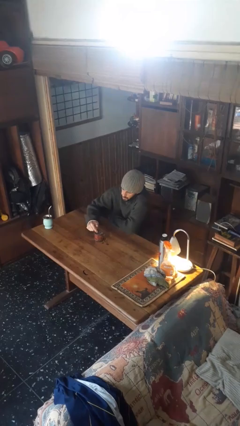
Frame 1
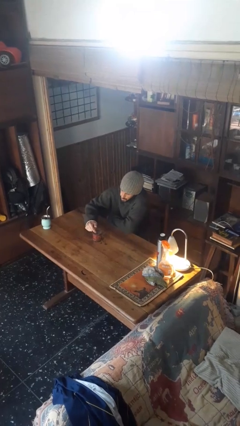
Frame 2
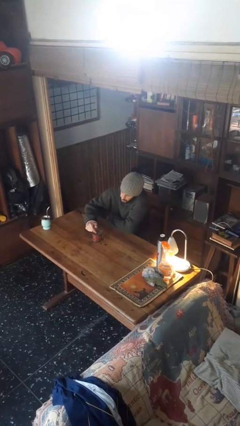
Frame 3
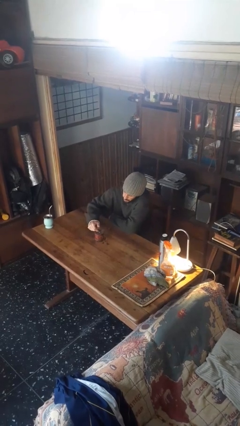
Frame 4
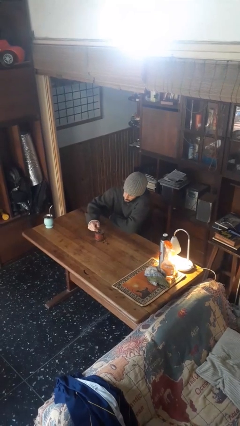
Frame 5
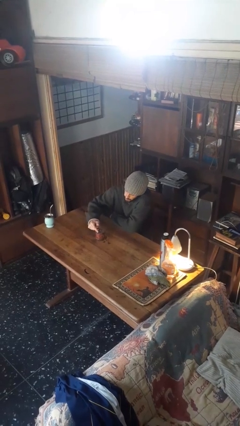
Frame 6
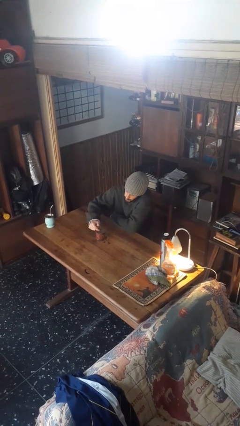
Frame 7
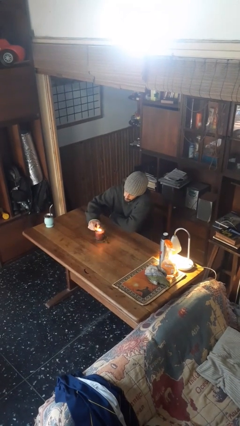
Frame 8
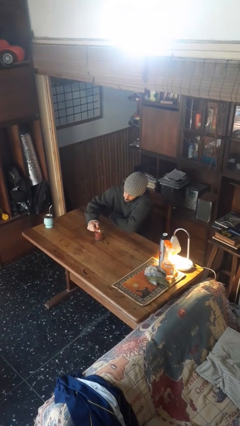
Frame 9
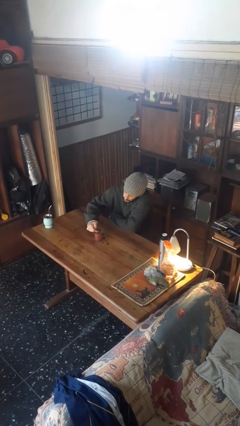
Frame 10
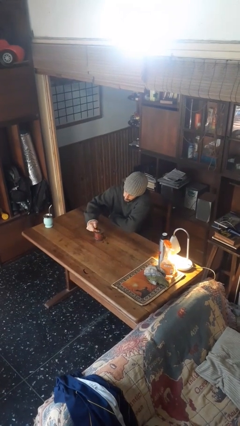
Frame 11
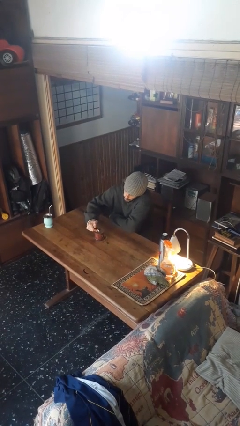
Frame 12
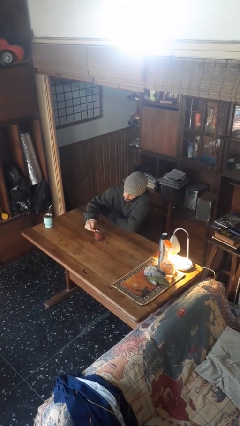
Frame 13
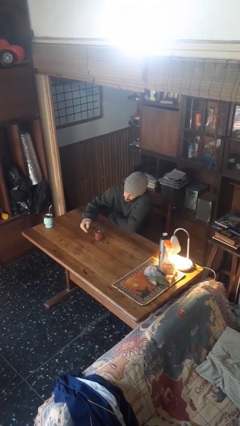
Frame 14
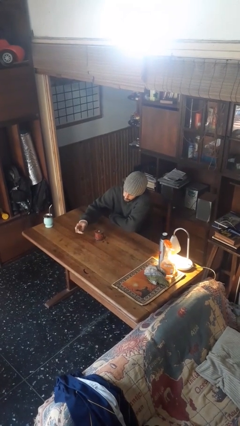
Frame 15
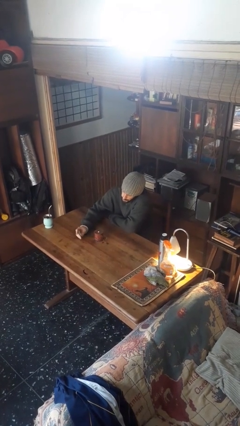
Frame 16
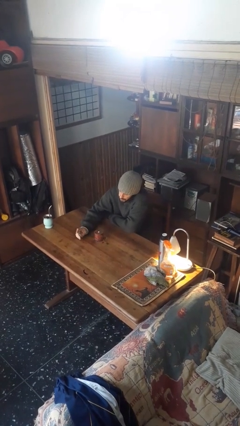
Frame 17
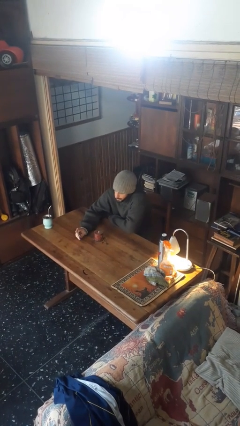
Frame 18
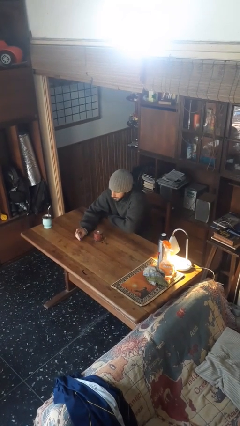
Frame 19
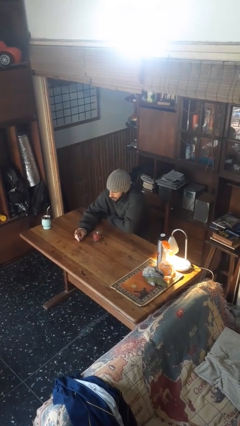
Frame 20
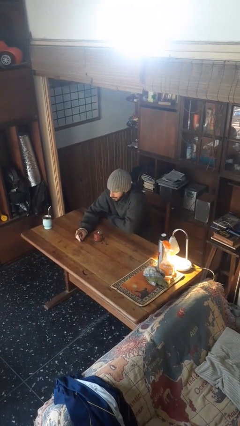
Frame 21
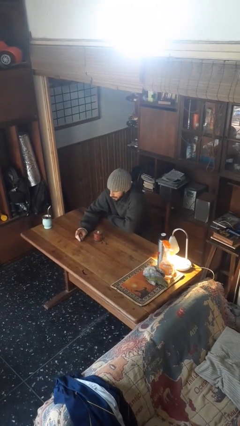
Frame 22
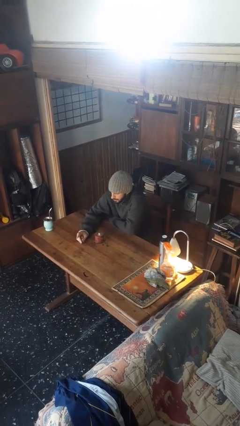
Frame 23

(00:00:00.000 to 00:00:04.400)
person lights candle

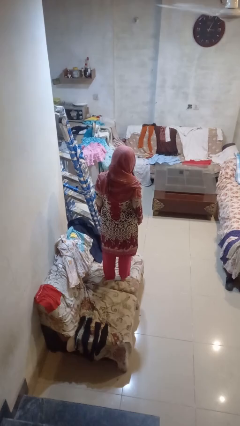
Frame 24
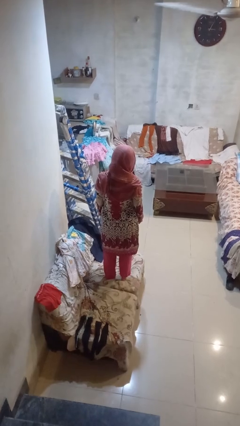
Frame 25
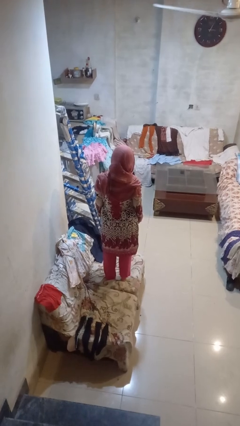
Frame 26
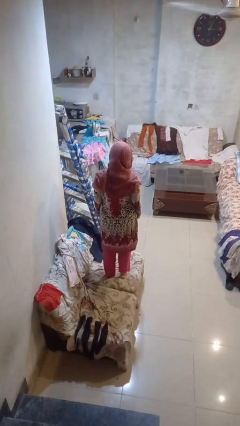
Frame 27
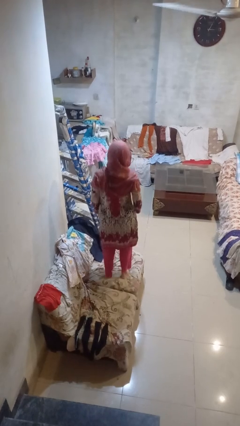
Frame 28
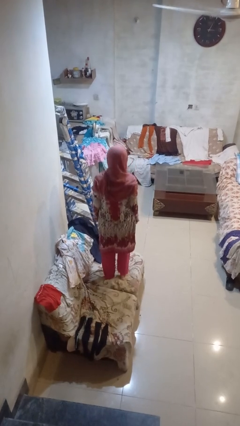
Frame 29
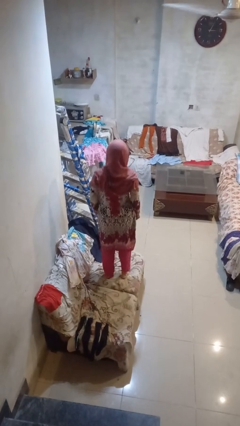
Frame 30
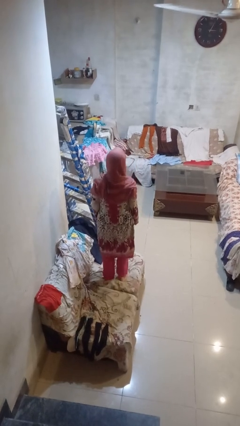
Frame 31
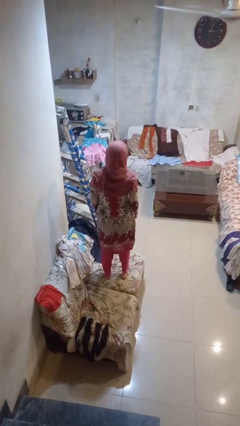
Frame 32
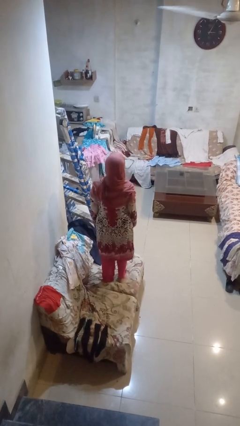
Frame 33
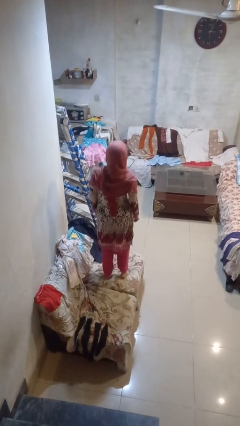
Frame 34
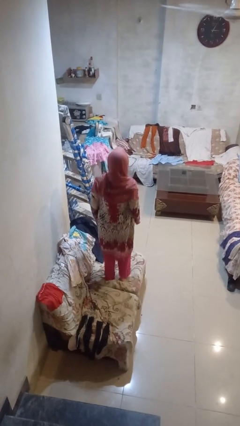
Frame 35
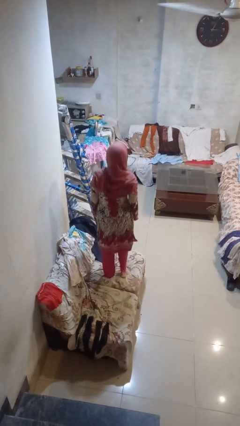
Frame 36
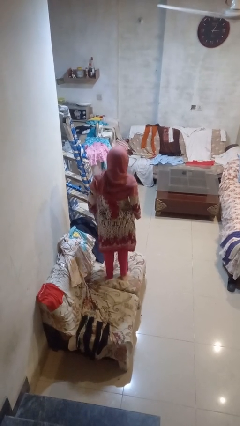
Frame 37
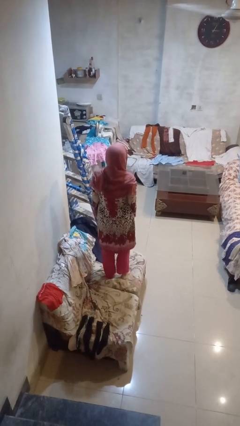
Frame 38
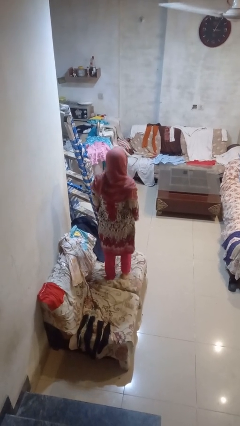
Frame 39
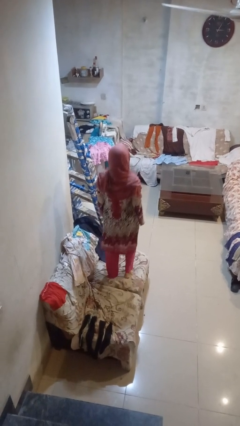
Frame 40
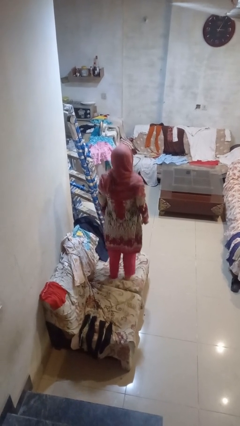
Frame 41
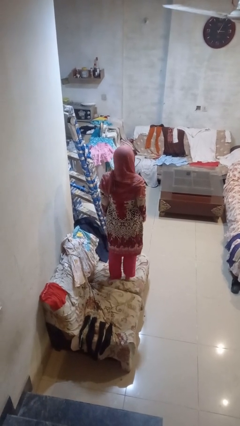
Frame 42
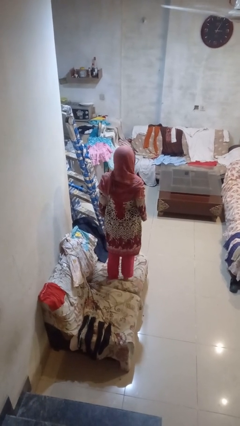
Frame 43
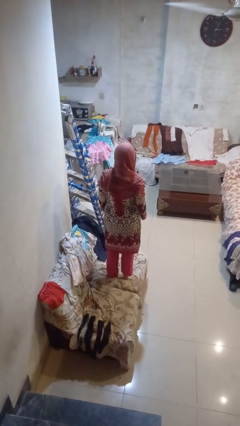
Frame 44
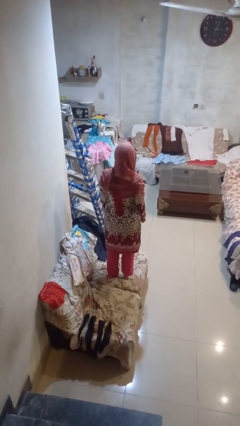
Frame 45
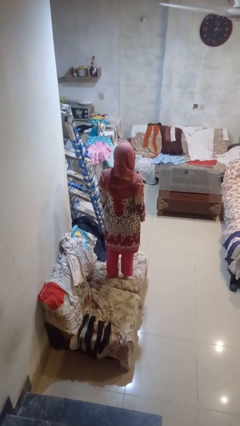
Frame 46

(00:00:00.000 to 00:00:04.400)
person jumps on couch

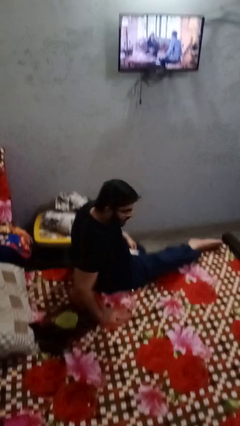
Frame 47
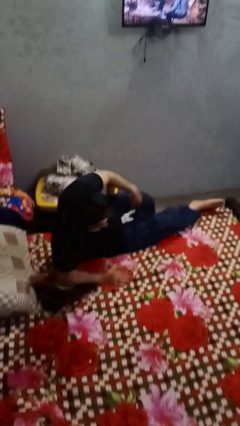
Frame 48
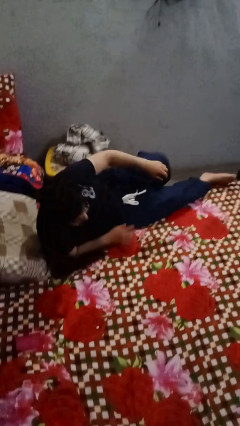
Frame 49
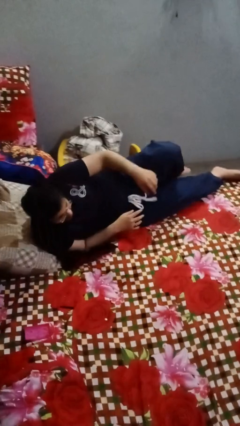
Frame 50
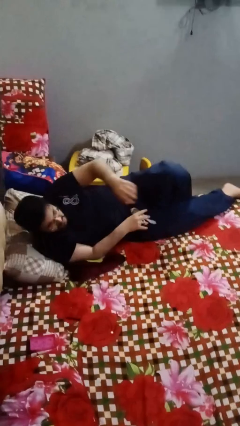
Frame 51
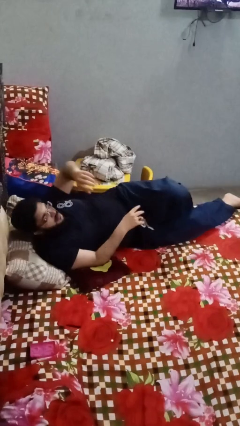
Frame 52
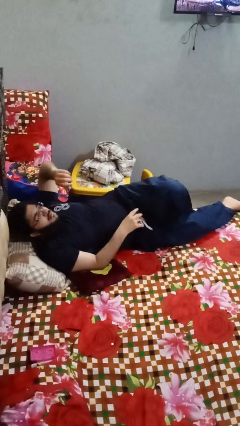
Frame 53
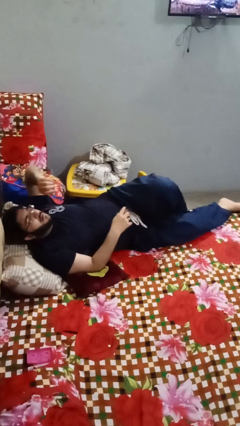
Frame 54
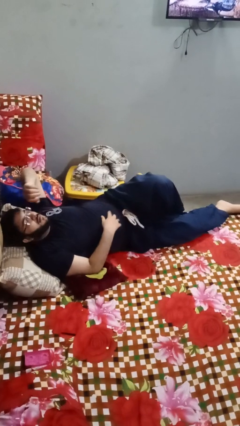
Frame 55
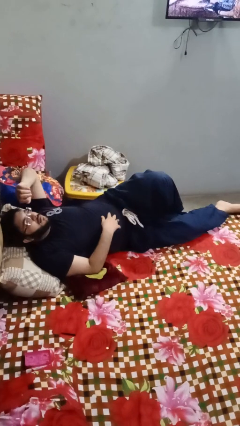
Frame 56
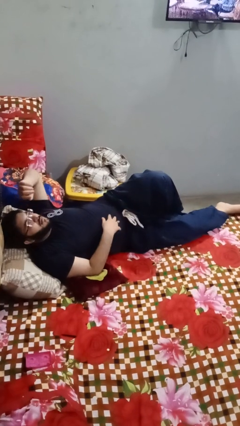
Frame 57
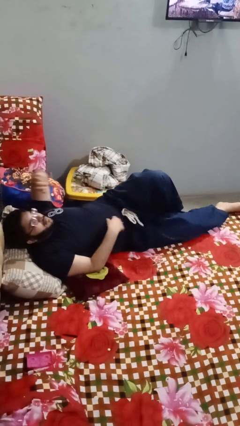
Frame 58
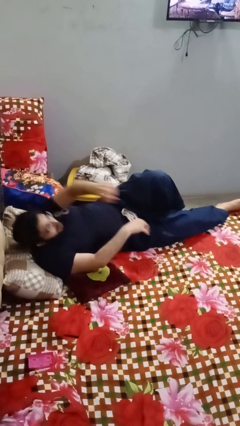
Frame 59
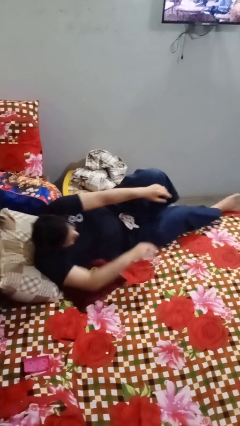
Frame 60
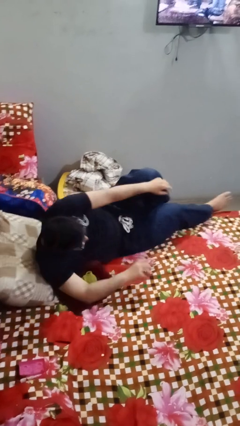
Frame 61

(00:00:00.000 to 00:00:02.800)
person lies down on bed

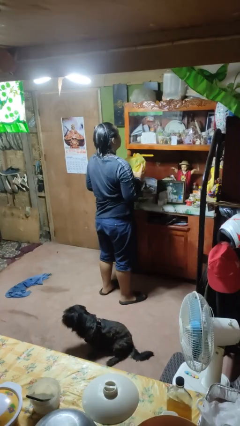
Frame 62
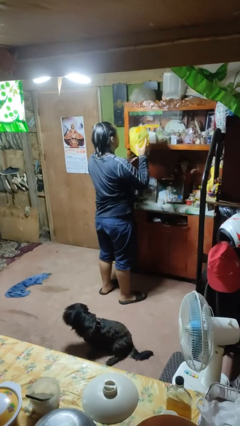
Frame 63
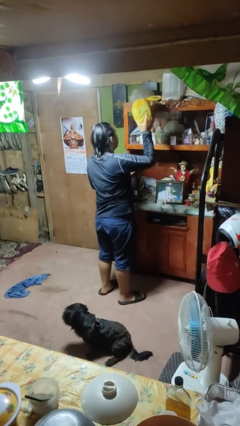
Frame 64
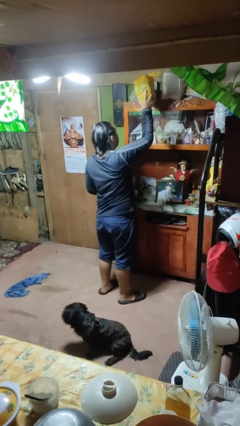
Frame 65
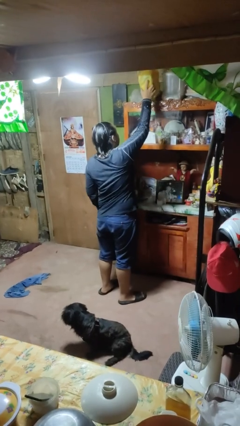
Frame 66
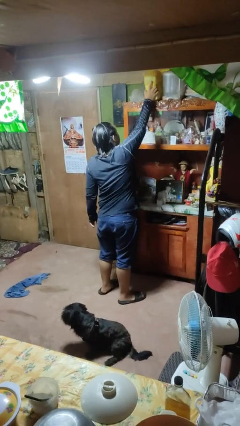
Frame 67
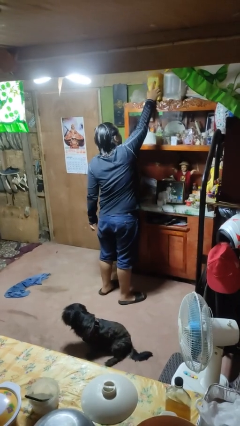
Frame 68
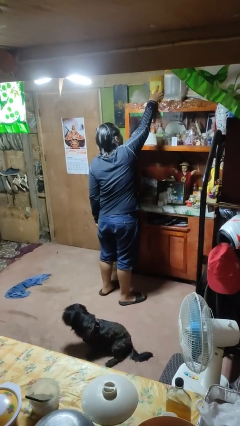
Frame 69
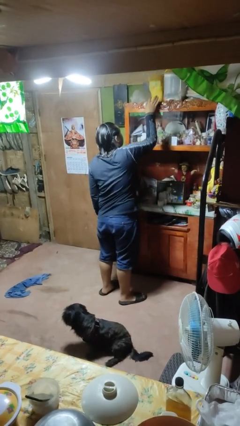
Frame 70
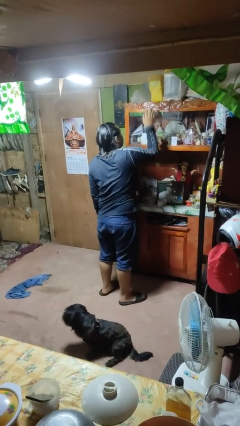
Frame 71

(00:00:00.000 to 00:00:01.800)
person puts down object on shelf

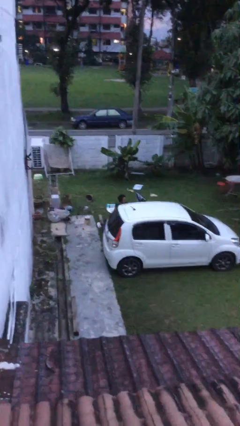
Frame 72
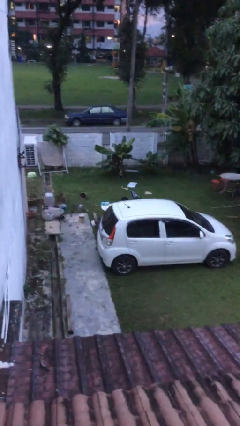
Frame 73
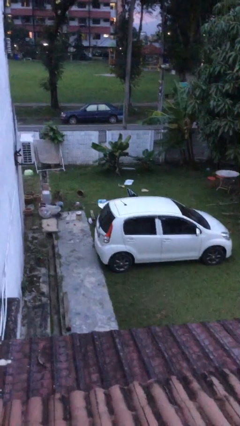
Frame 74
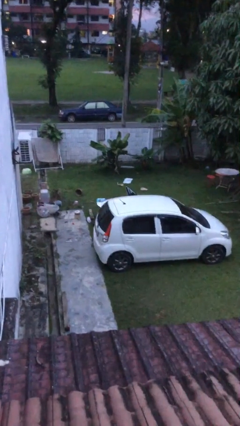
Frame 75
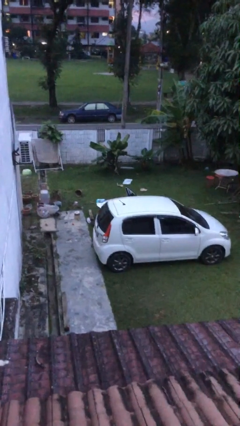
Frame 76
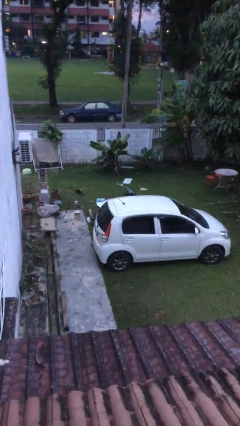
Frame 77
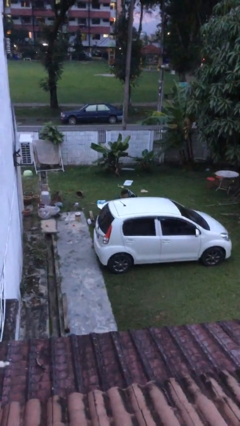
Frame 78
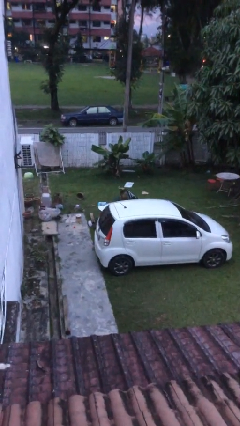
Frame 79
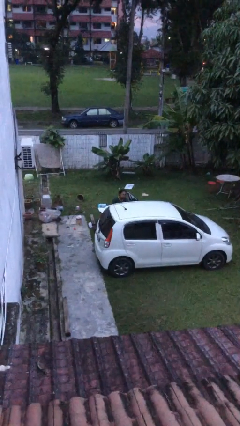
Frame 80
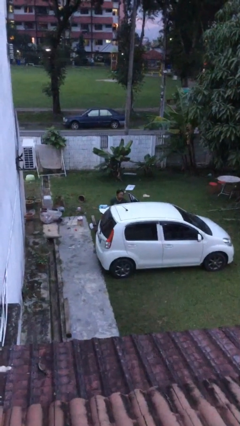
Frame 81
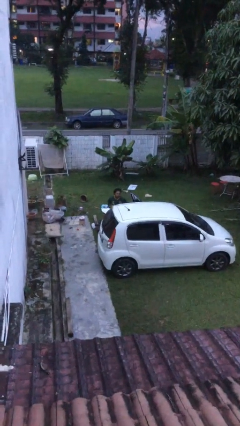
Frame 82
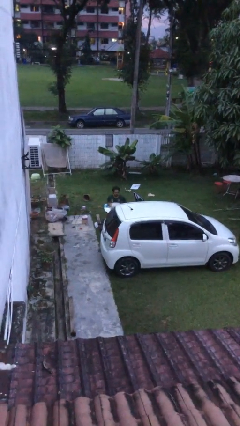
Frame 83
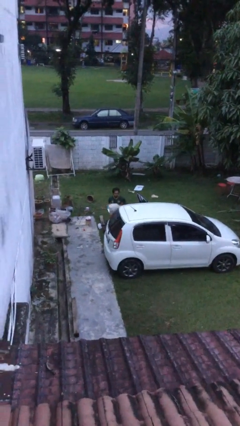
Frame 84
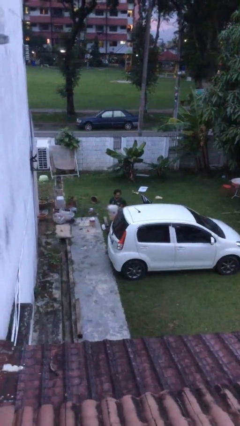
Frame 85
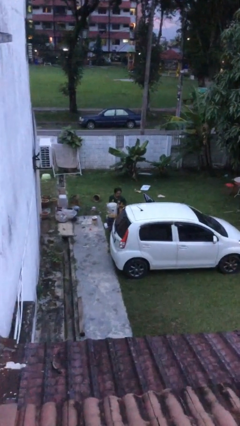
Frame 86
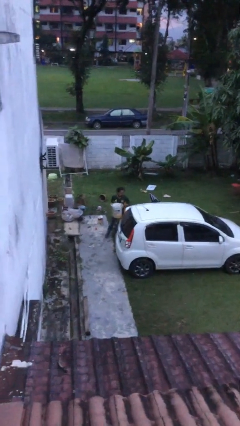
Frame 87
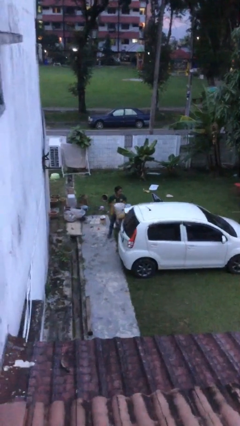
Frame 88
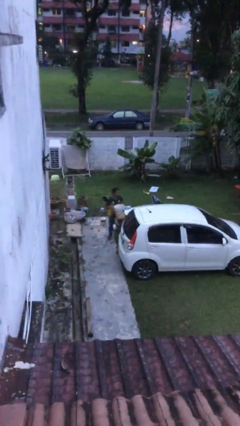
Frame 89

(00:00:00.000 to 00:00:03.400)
person unloads car

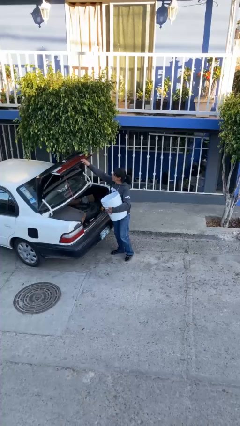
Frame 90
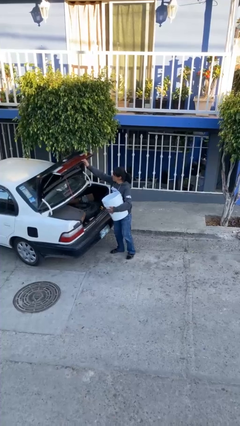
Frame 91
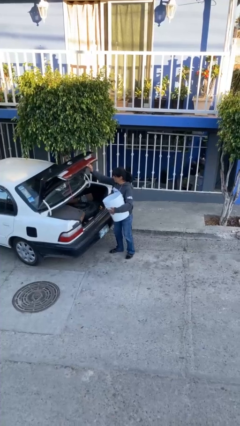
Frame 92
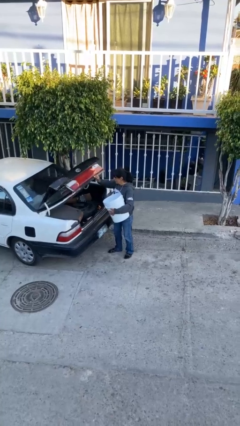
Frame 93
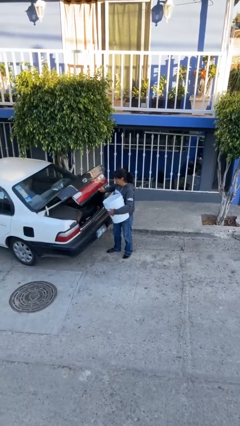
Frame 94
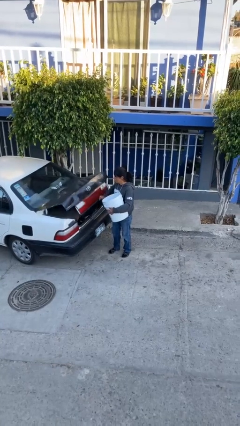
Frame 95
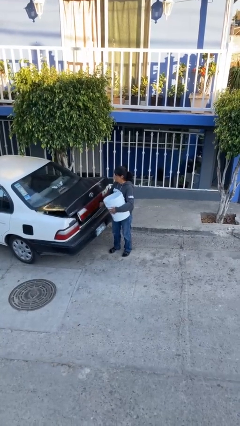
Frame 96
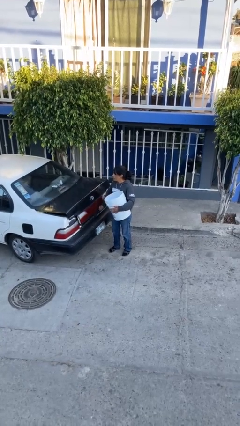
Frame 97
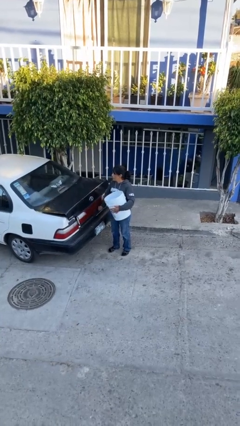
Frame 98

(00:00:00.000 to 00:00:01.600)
person closes car trunk
